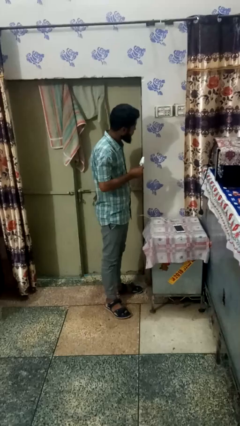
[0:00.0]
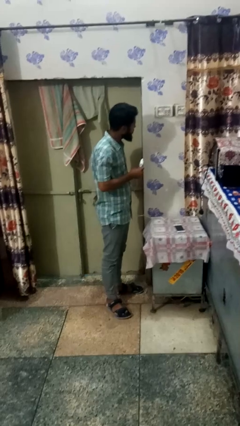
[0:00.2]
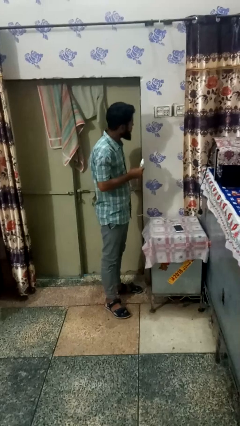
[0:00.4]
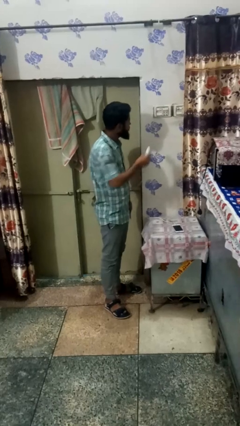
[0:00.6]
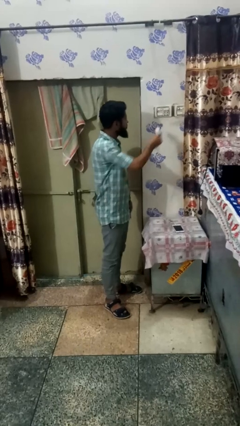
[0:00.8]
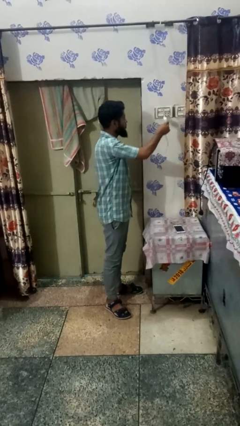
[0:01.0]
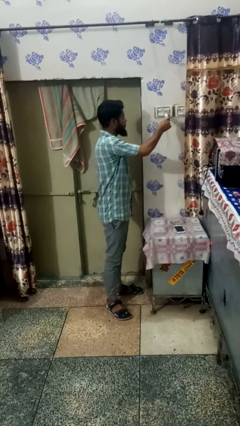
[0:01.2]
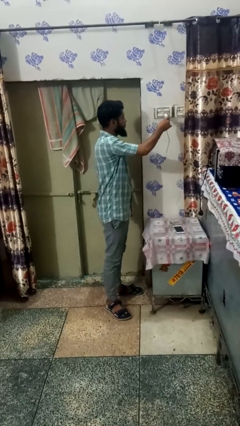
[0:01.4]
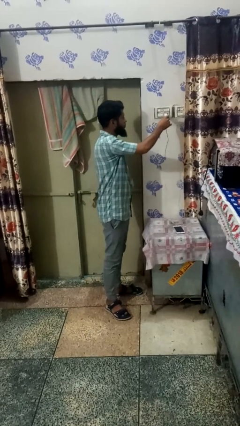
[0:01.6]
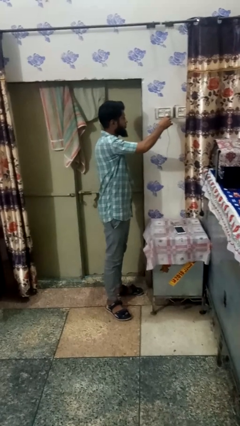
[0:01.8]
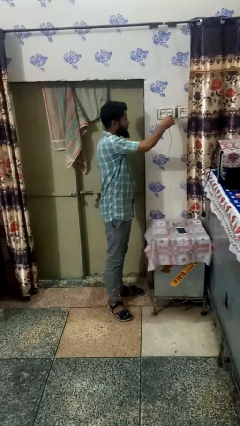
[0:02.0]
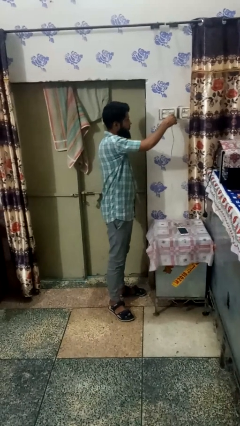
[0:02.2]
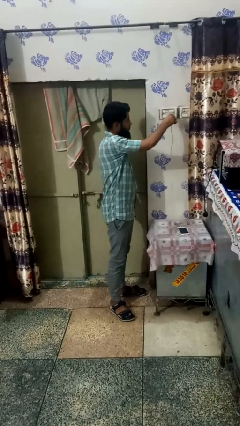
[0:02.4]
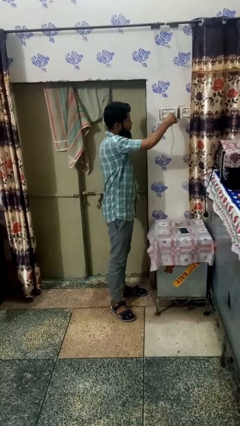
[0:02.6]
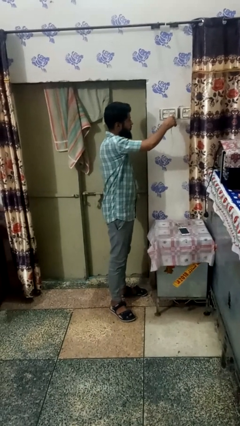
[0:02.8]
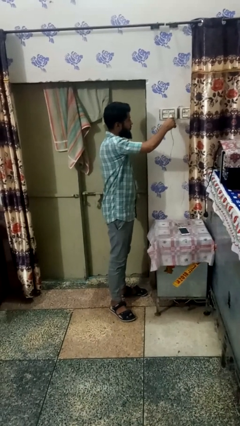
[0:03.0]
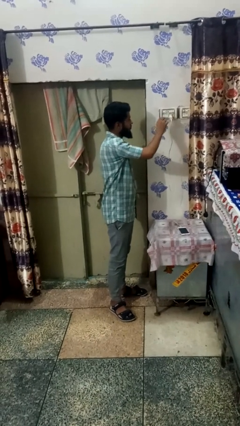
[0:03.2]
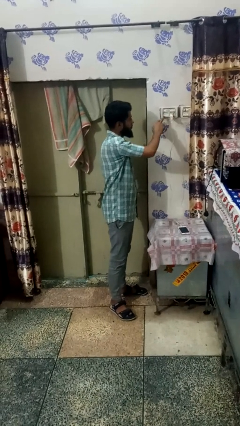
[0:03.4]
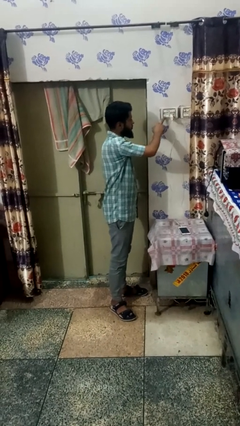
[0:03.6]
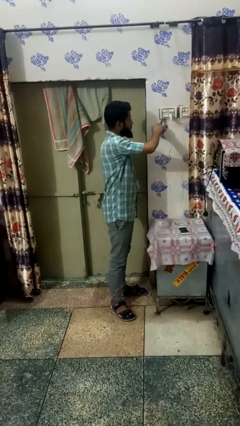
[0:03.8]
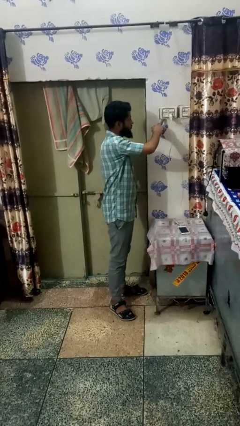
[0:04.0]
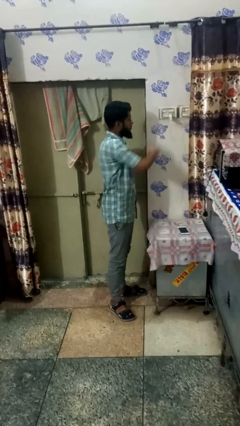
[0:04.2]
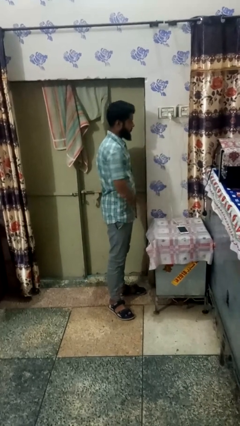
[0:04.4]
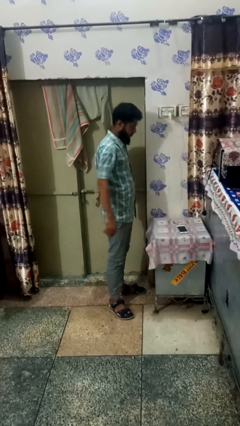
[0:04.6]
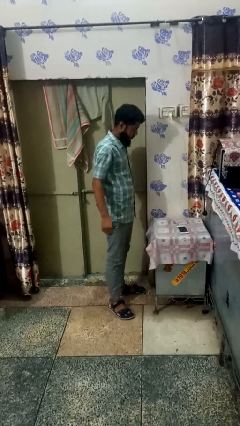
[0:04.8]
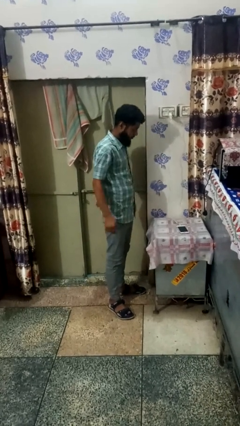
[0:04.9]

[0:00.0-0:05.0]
person plugs into electrical socket

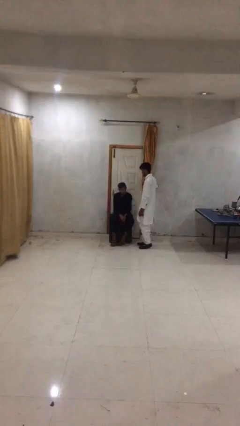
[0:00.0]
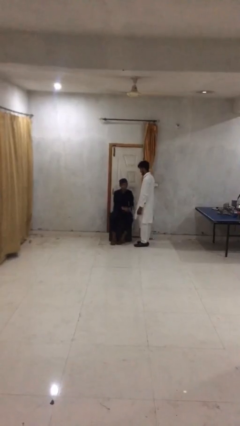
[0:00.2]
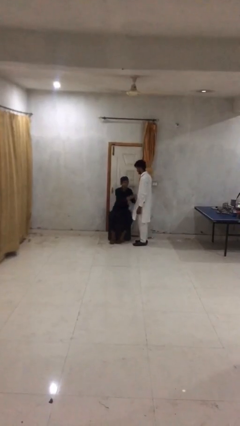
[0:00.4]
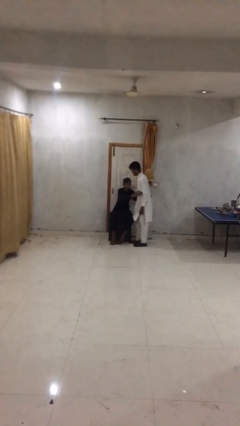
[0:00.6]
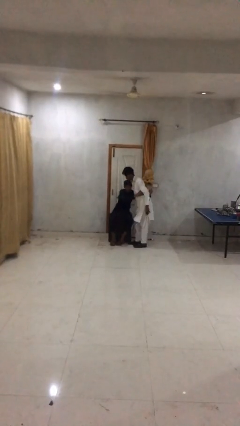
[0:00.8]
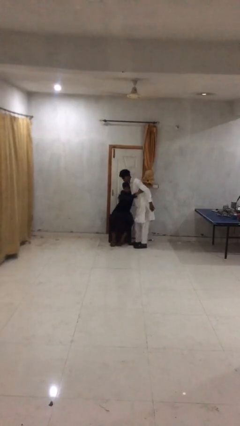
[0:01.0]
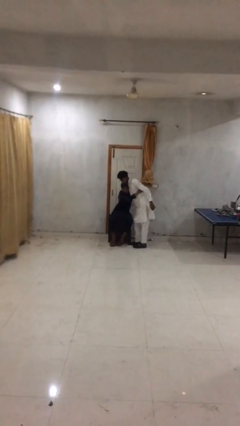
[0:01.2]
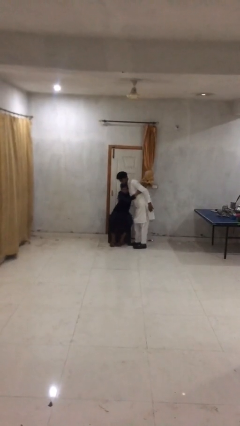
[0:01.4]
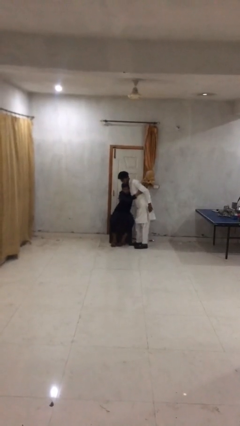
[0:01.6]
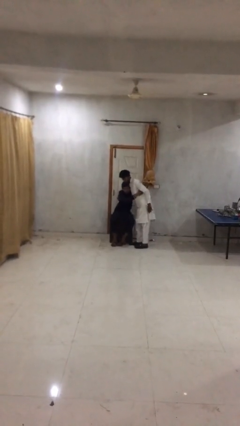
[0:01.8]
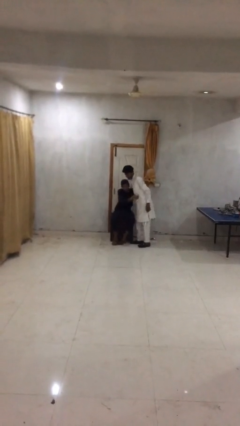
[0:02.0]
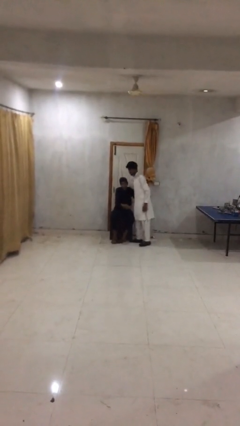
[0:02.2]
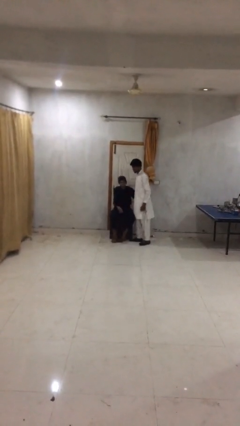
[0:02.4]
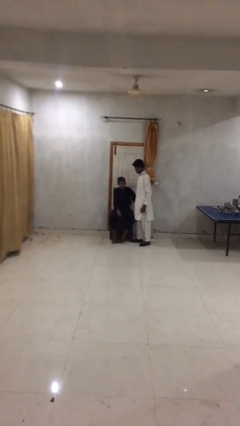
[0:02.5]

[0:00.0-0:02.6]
person embraces person

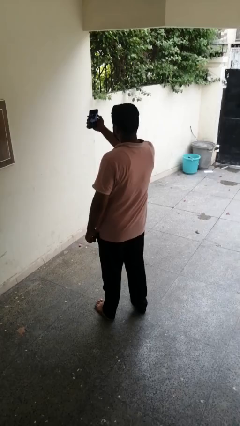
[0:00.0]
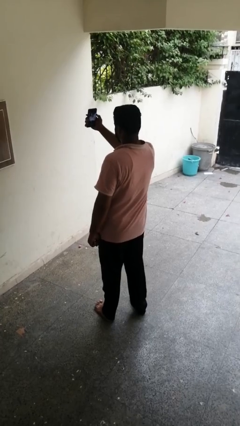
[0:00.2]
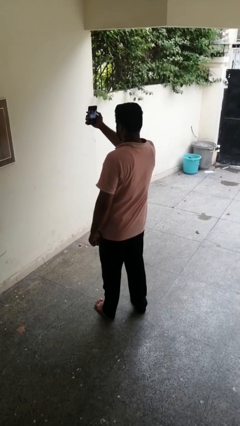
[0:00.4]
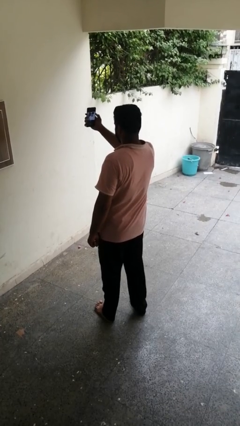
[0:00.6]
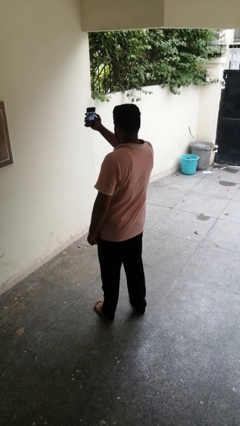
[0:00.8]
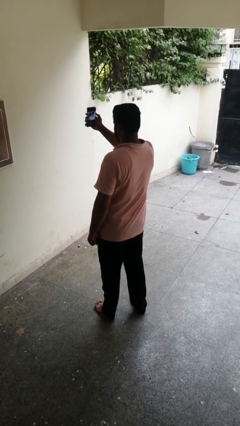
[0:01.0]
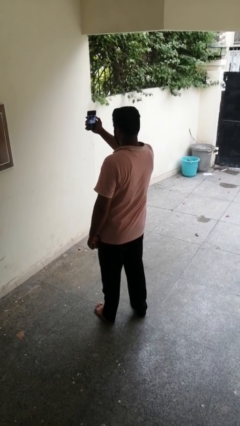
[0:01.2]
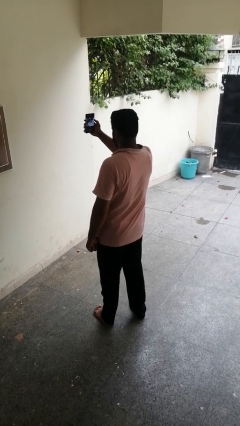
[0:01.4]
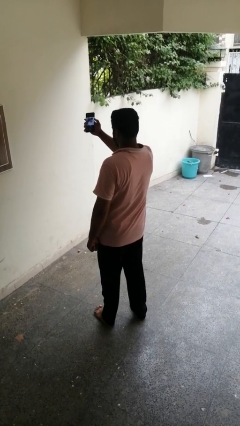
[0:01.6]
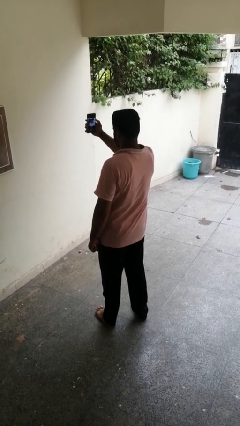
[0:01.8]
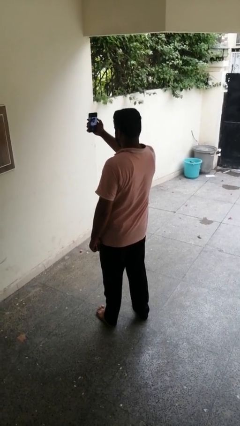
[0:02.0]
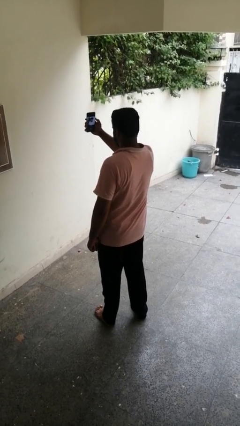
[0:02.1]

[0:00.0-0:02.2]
person takes selfie

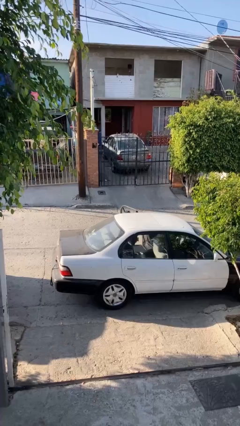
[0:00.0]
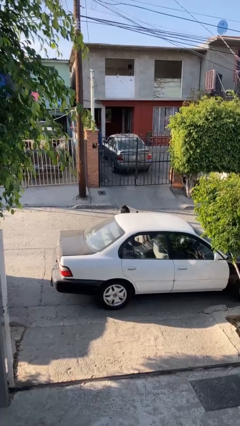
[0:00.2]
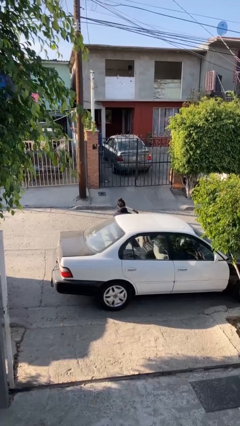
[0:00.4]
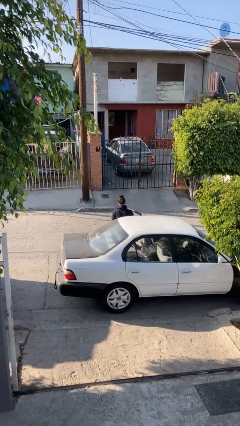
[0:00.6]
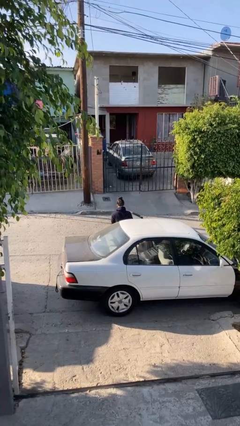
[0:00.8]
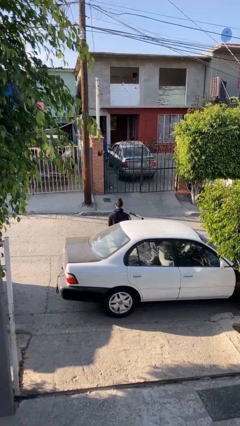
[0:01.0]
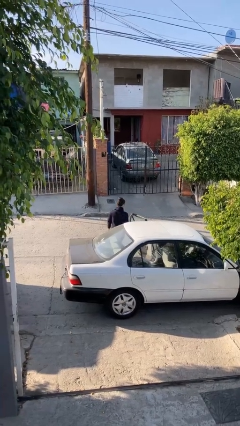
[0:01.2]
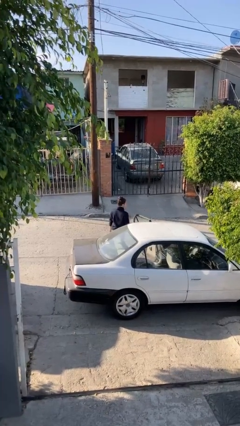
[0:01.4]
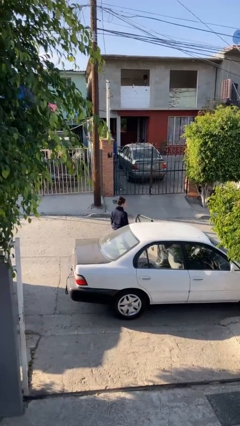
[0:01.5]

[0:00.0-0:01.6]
person exits car

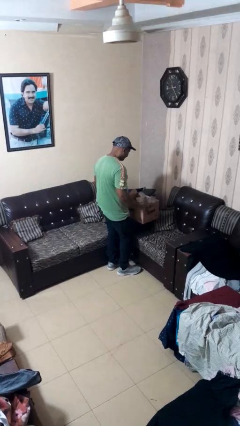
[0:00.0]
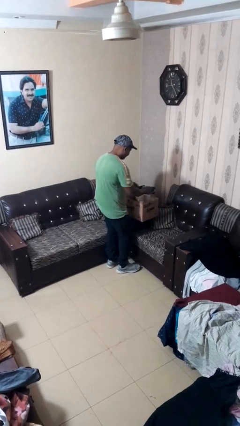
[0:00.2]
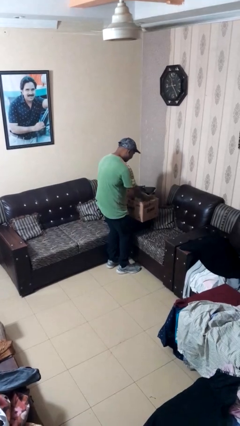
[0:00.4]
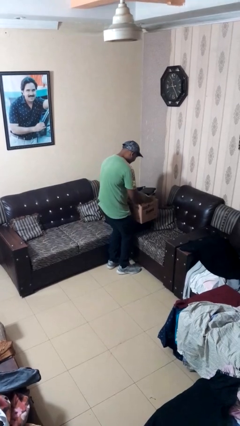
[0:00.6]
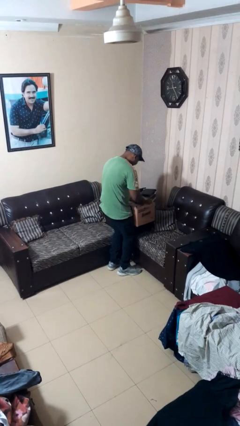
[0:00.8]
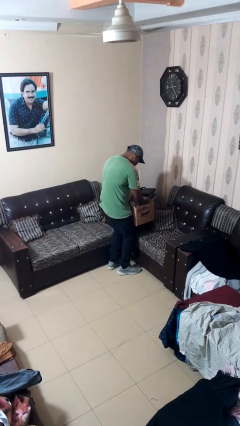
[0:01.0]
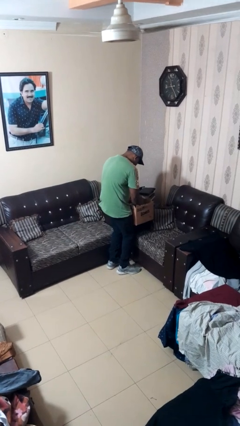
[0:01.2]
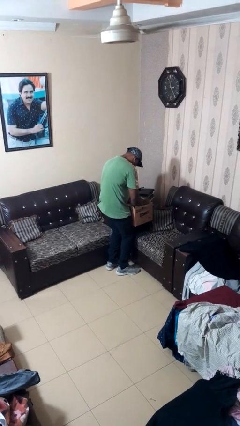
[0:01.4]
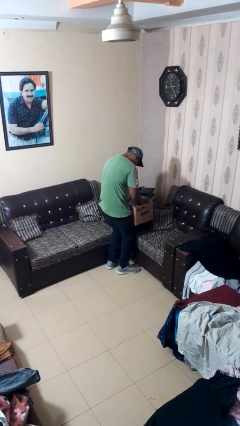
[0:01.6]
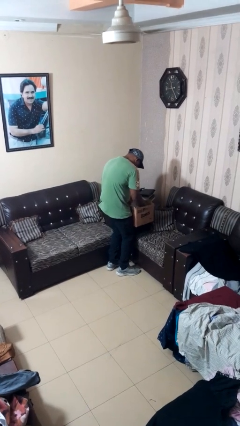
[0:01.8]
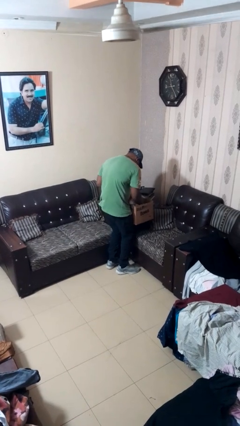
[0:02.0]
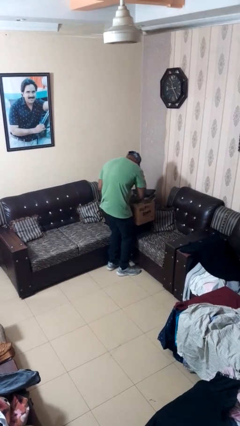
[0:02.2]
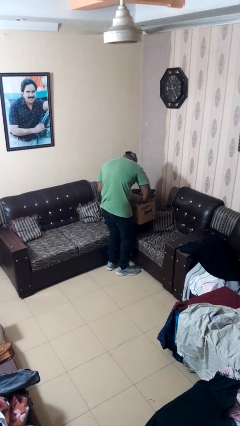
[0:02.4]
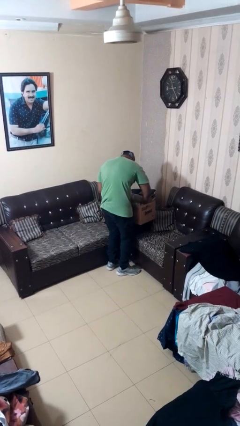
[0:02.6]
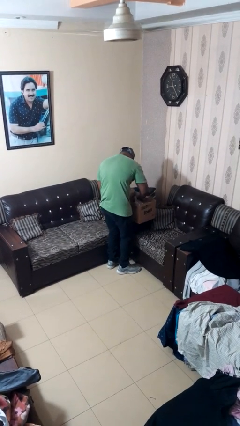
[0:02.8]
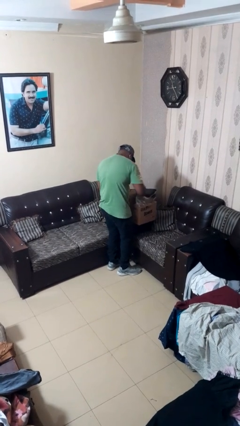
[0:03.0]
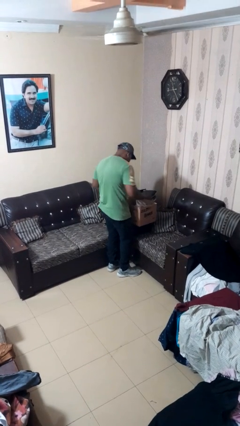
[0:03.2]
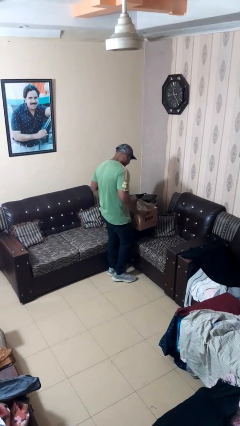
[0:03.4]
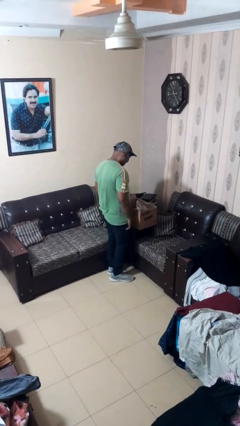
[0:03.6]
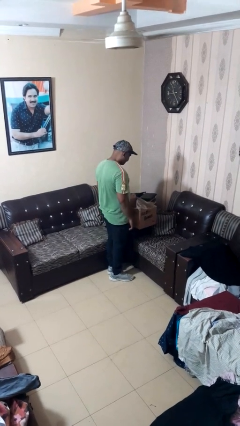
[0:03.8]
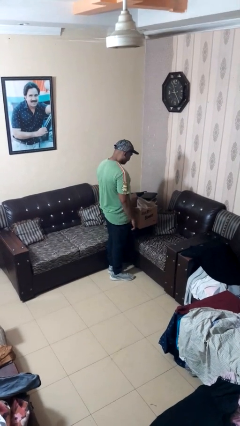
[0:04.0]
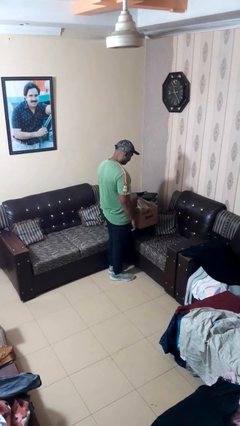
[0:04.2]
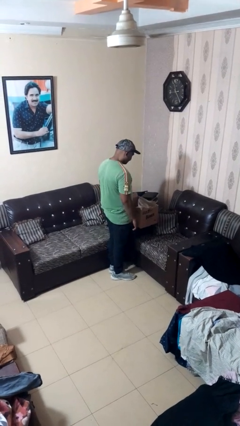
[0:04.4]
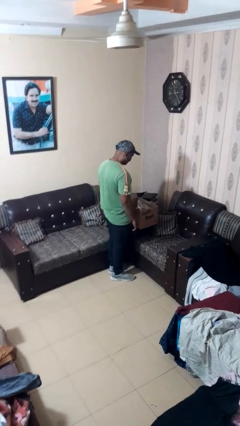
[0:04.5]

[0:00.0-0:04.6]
person searches in box

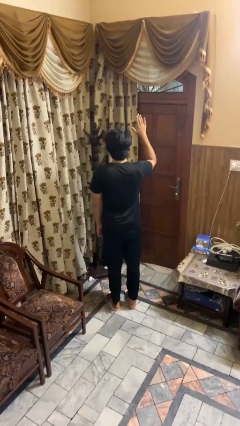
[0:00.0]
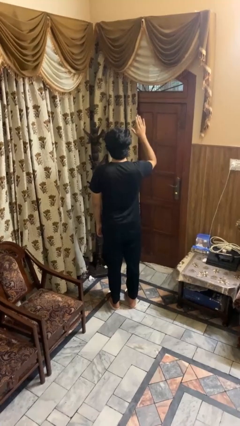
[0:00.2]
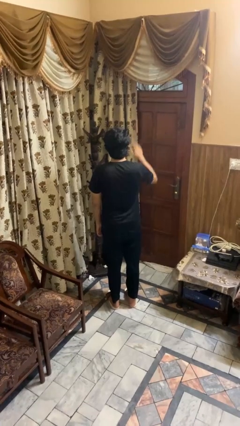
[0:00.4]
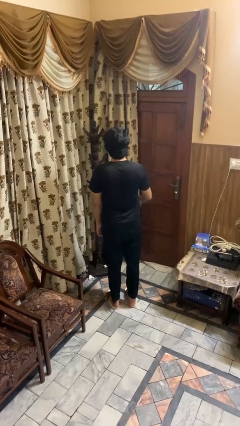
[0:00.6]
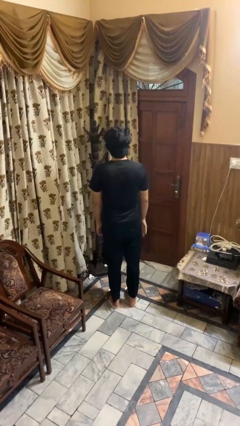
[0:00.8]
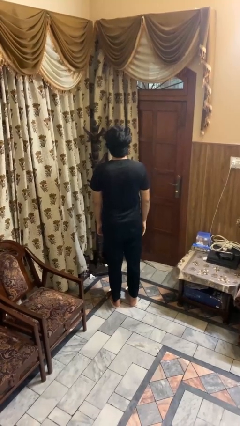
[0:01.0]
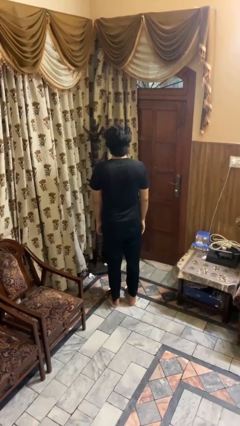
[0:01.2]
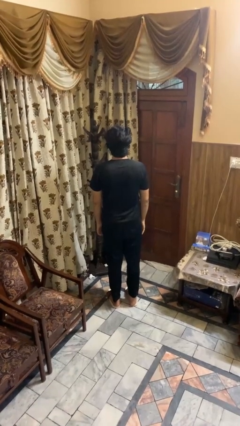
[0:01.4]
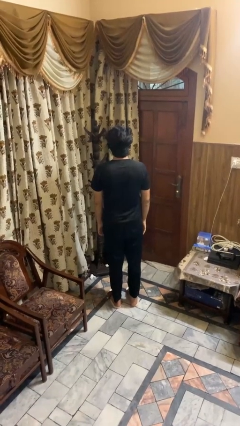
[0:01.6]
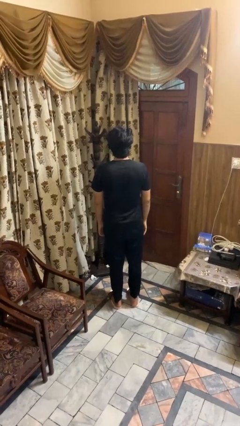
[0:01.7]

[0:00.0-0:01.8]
person gestures lower hand
